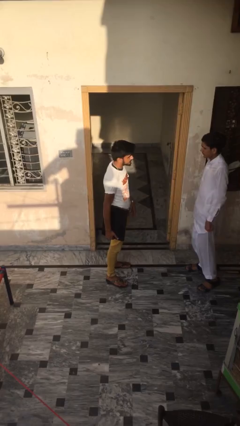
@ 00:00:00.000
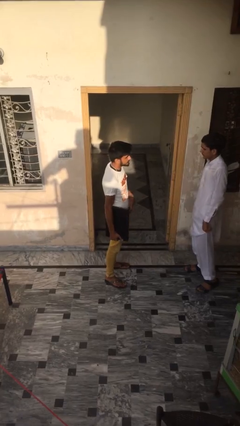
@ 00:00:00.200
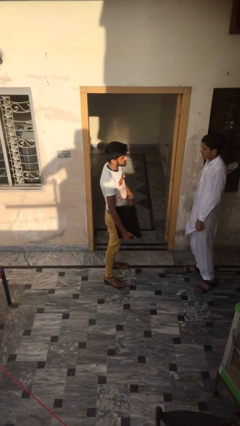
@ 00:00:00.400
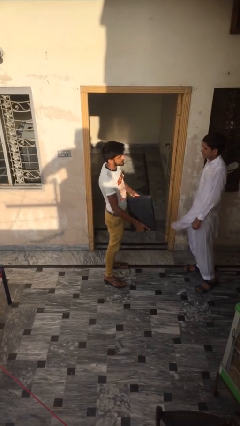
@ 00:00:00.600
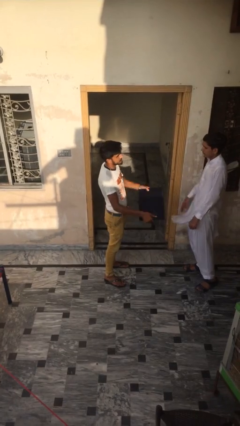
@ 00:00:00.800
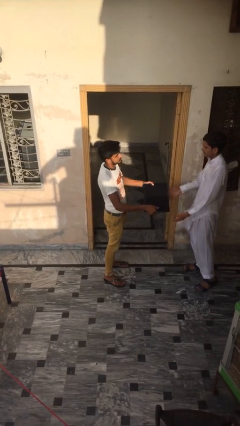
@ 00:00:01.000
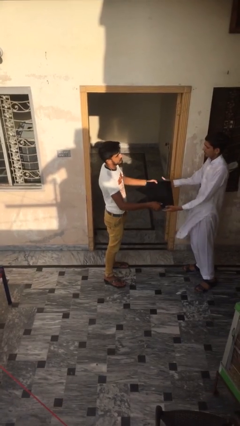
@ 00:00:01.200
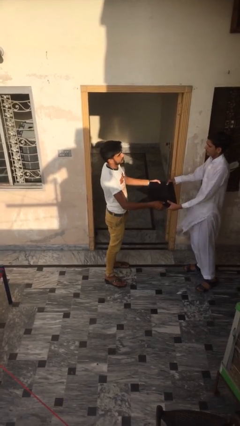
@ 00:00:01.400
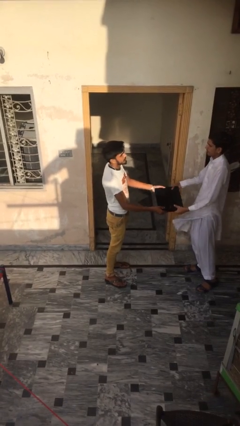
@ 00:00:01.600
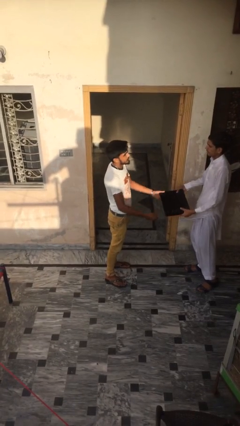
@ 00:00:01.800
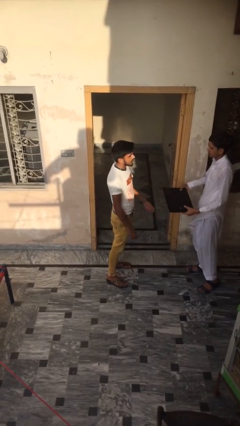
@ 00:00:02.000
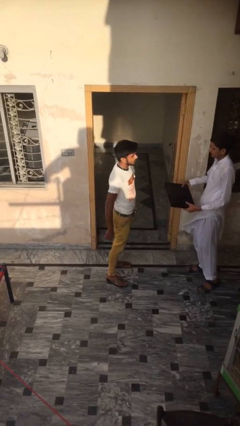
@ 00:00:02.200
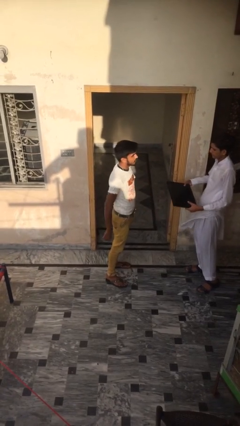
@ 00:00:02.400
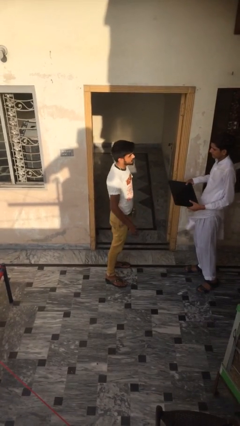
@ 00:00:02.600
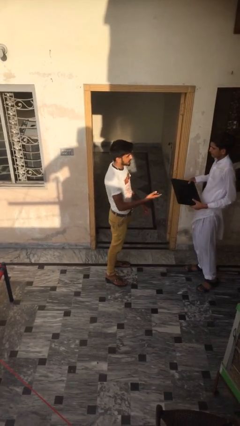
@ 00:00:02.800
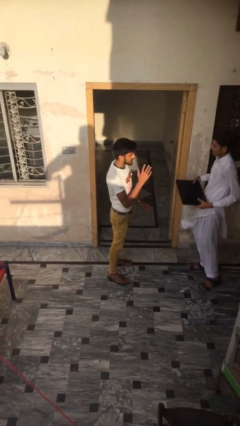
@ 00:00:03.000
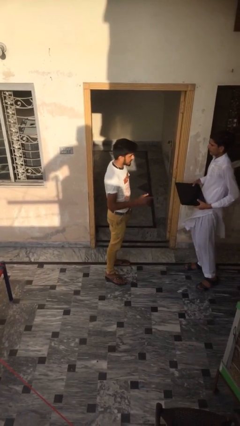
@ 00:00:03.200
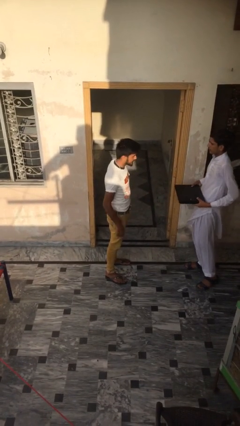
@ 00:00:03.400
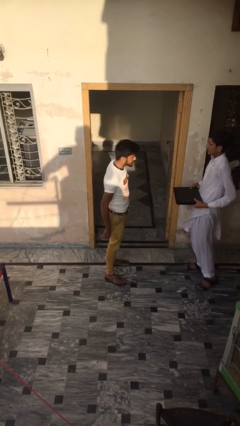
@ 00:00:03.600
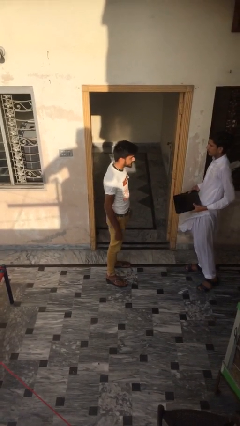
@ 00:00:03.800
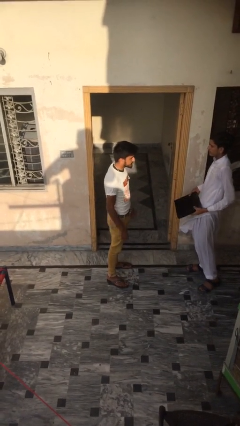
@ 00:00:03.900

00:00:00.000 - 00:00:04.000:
person transfers object to person

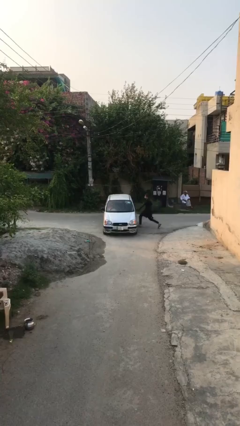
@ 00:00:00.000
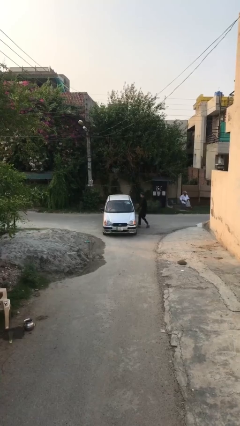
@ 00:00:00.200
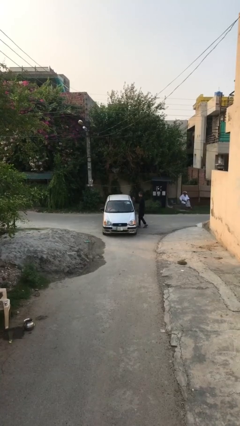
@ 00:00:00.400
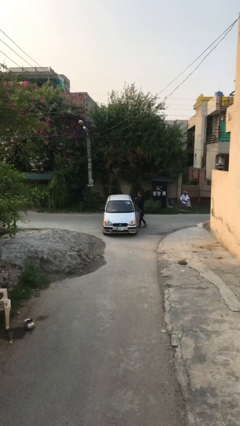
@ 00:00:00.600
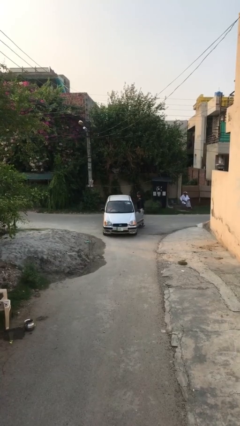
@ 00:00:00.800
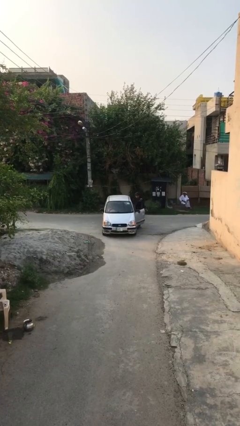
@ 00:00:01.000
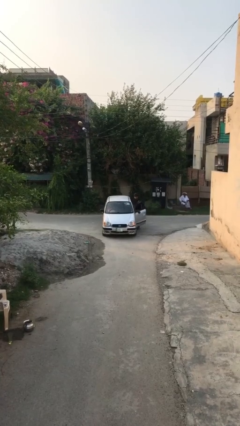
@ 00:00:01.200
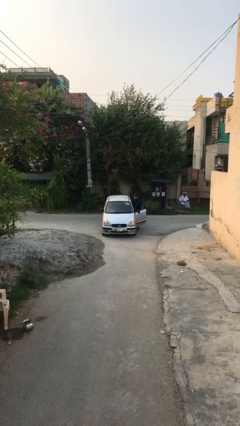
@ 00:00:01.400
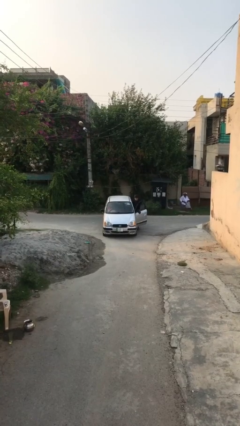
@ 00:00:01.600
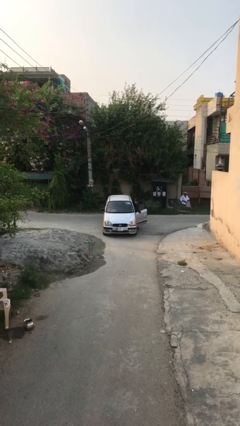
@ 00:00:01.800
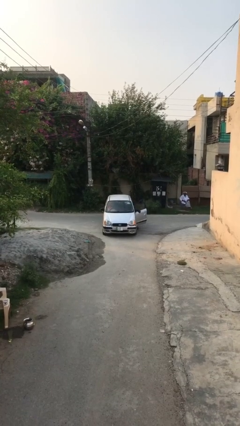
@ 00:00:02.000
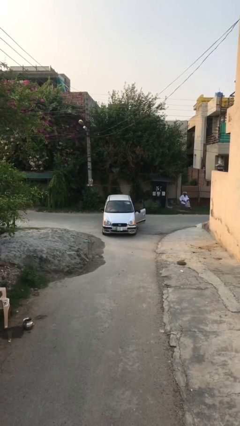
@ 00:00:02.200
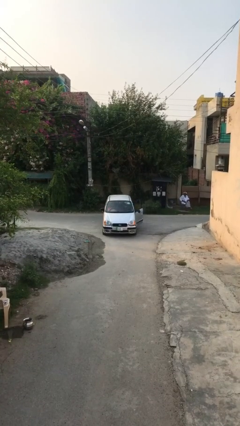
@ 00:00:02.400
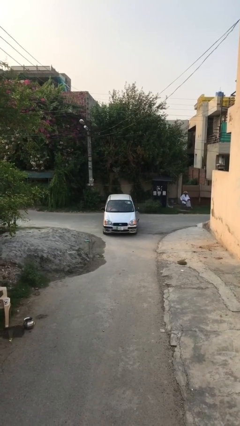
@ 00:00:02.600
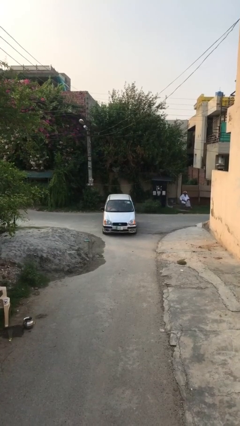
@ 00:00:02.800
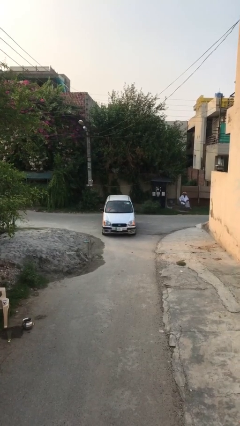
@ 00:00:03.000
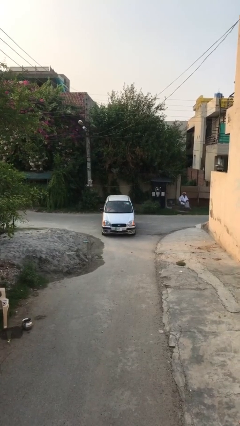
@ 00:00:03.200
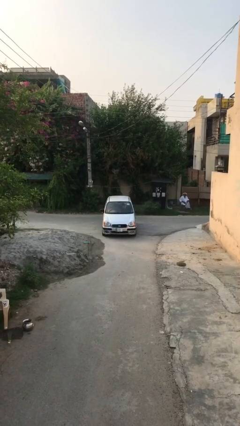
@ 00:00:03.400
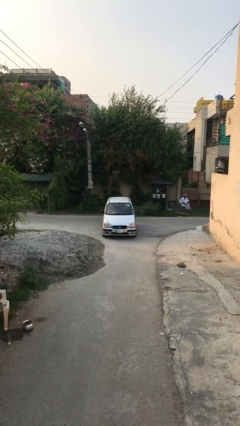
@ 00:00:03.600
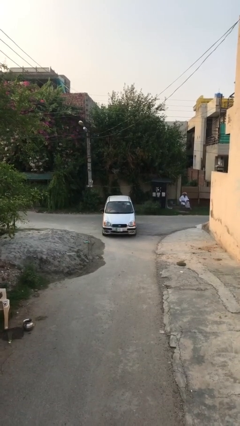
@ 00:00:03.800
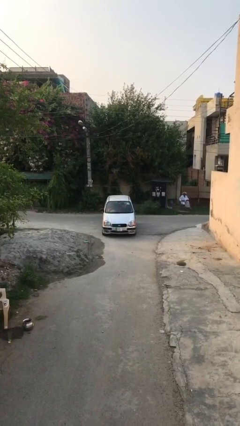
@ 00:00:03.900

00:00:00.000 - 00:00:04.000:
car picks up person

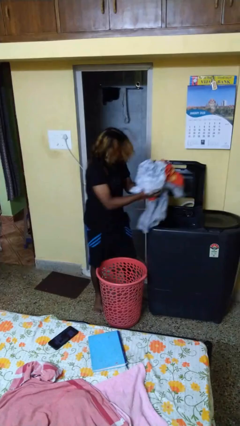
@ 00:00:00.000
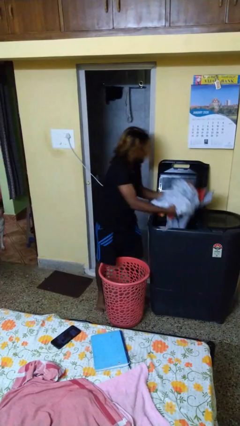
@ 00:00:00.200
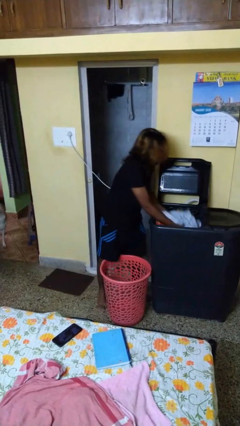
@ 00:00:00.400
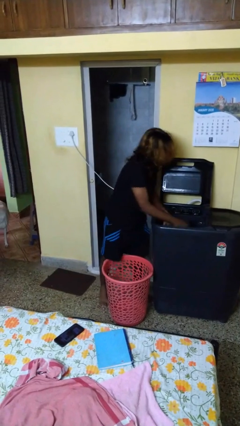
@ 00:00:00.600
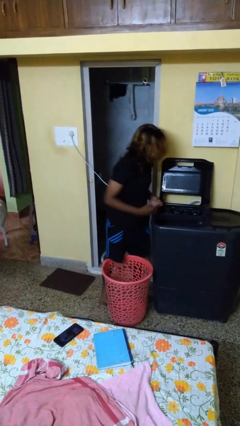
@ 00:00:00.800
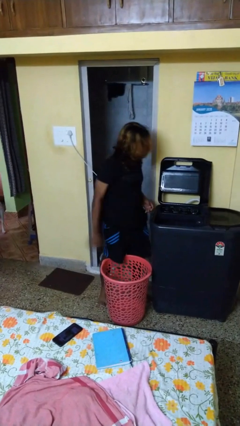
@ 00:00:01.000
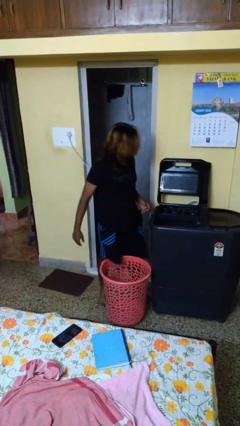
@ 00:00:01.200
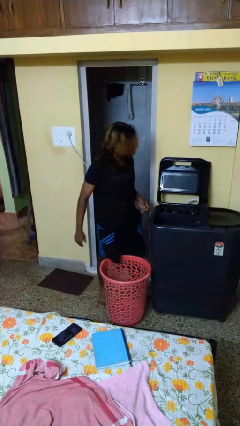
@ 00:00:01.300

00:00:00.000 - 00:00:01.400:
person loads clotheswasher

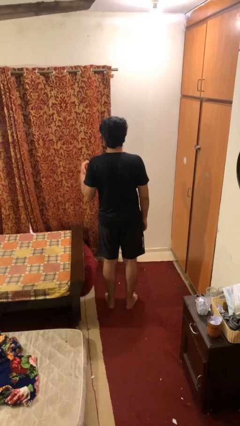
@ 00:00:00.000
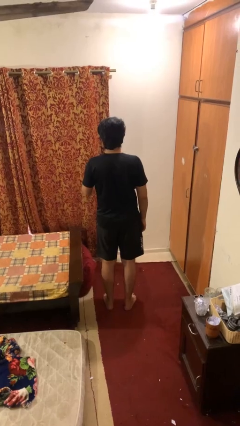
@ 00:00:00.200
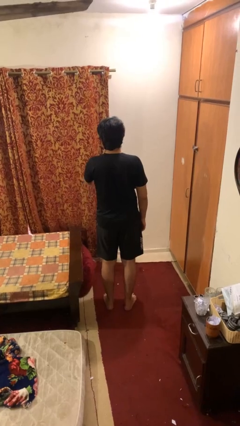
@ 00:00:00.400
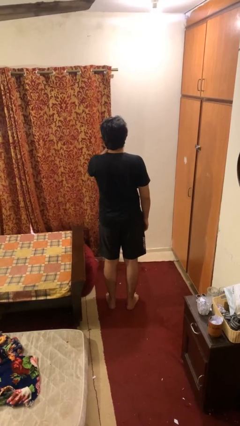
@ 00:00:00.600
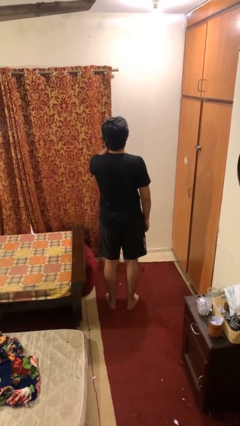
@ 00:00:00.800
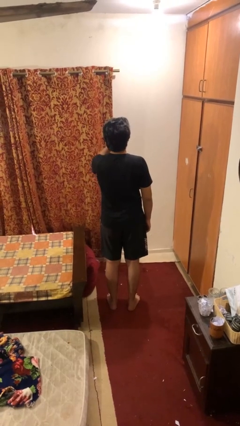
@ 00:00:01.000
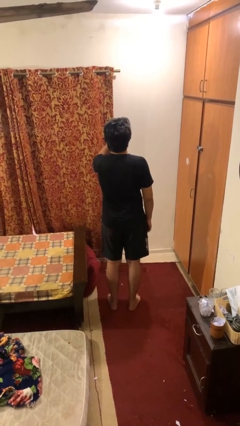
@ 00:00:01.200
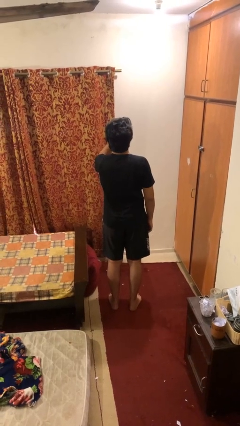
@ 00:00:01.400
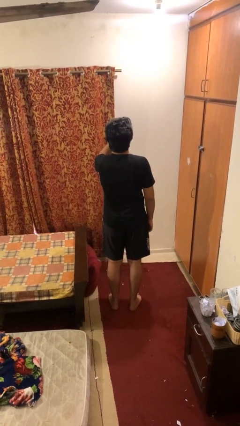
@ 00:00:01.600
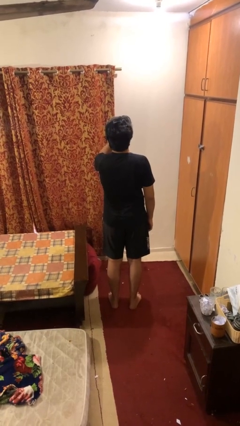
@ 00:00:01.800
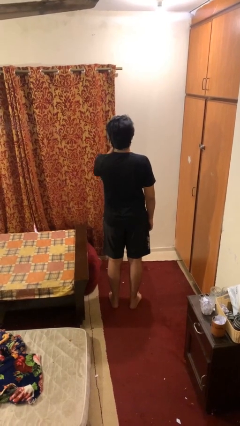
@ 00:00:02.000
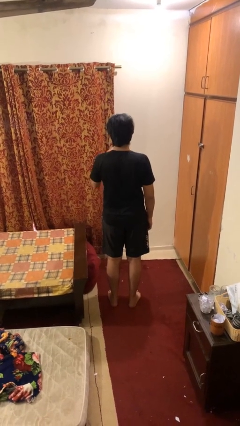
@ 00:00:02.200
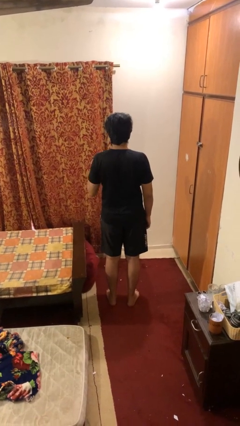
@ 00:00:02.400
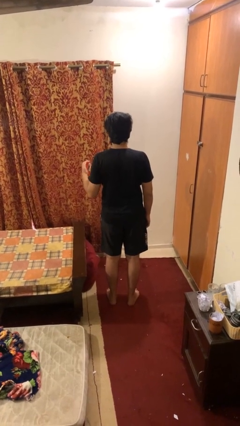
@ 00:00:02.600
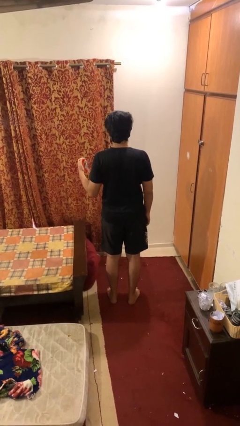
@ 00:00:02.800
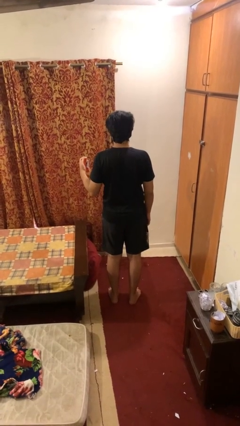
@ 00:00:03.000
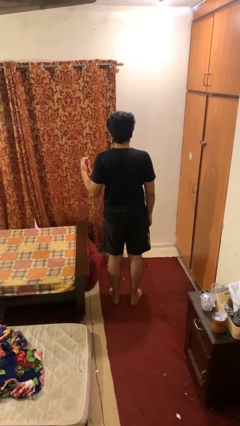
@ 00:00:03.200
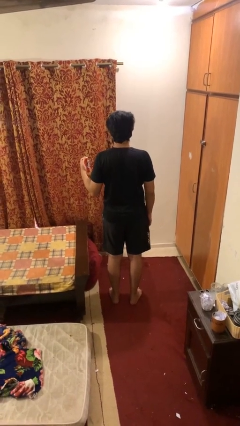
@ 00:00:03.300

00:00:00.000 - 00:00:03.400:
person drinks from beverage can

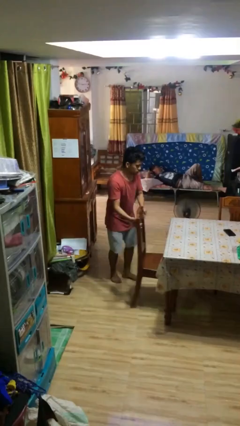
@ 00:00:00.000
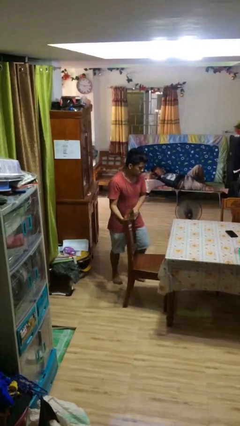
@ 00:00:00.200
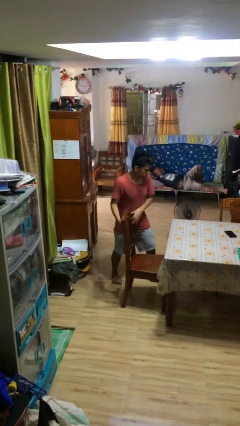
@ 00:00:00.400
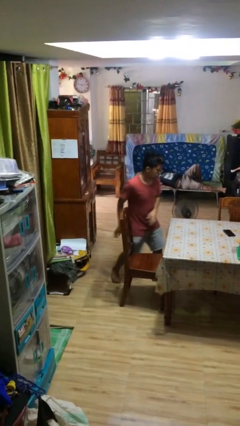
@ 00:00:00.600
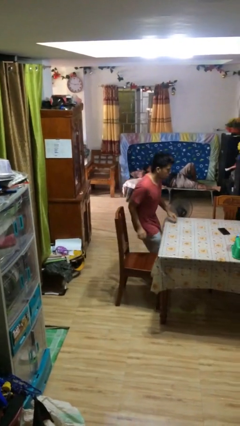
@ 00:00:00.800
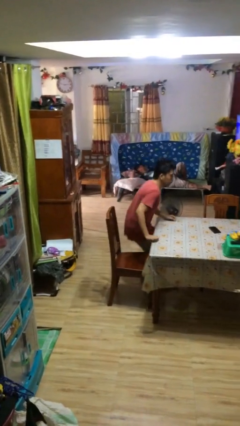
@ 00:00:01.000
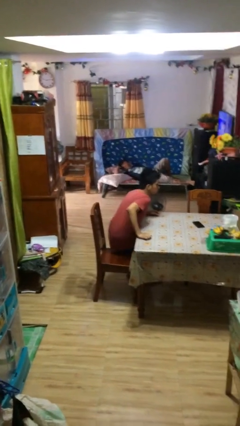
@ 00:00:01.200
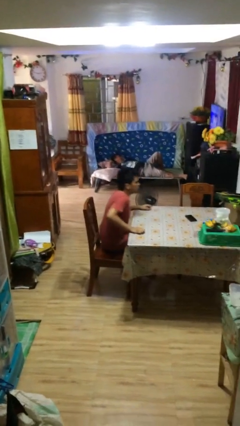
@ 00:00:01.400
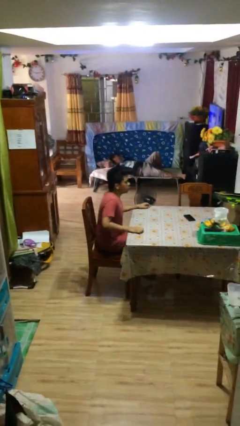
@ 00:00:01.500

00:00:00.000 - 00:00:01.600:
person stands up

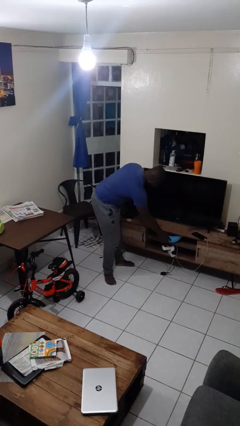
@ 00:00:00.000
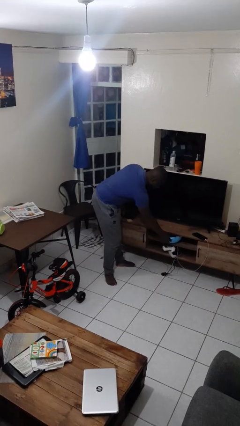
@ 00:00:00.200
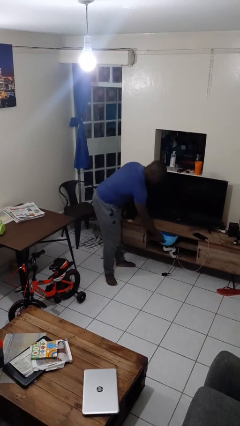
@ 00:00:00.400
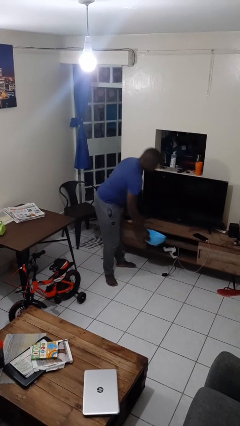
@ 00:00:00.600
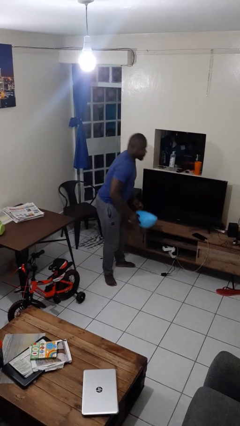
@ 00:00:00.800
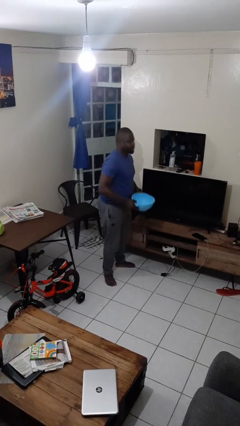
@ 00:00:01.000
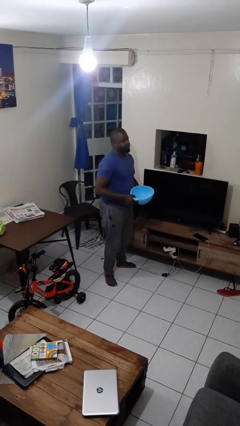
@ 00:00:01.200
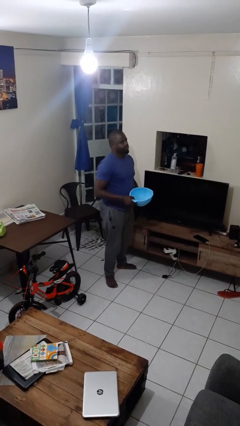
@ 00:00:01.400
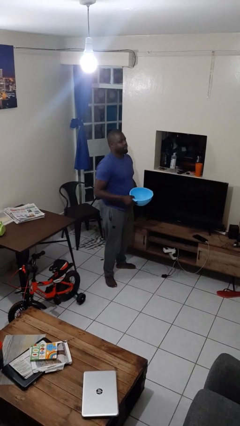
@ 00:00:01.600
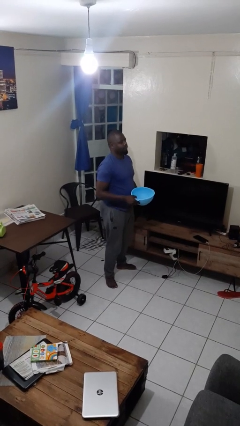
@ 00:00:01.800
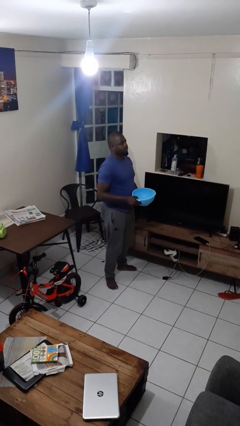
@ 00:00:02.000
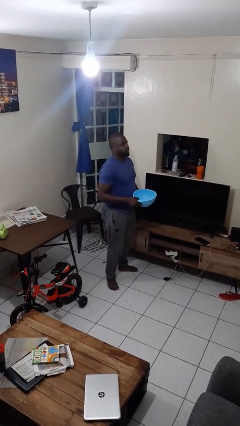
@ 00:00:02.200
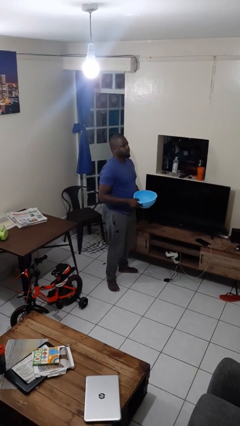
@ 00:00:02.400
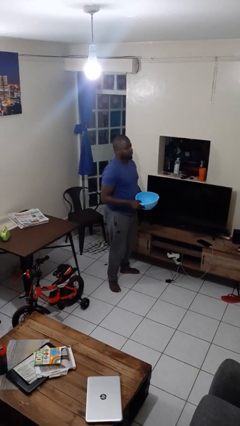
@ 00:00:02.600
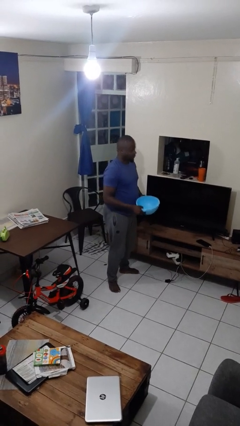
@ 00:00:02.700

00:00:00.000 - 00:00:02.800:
person picks up object from cabinet
